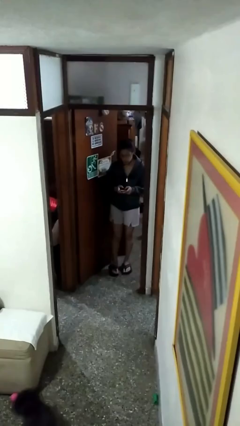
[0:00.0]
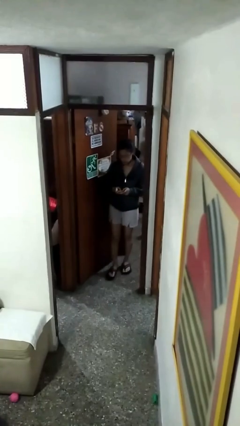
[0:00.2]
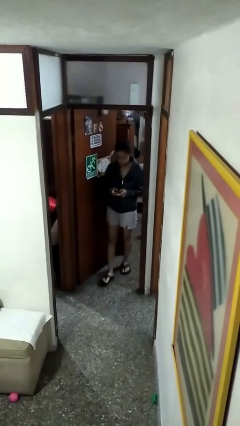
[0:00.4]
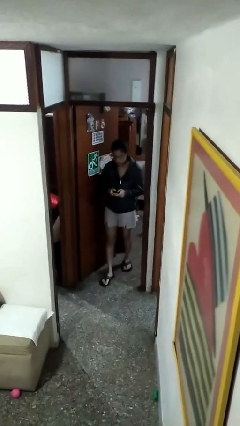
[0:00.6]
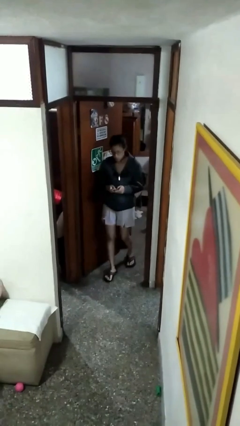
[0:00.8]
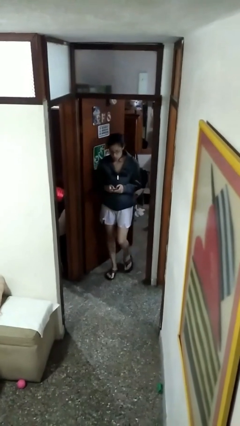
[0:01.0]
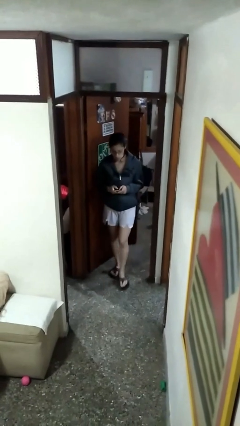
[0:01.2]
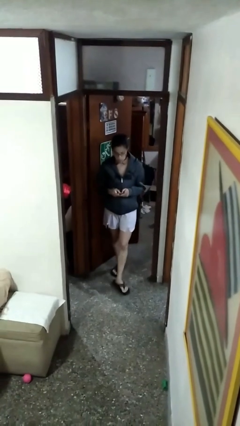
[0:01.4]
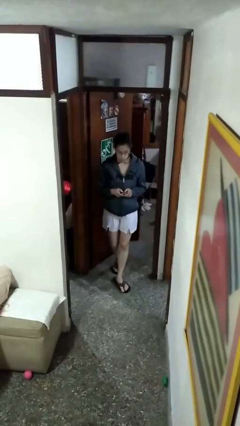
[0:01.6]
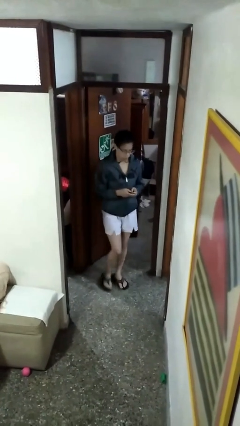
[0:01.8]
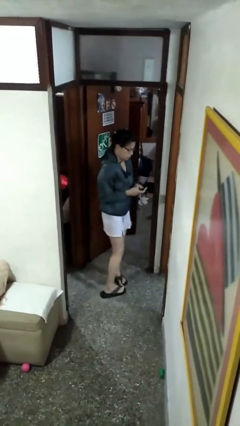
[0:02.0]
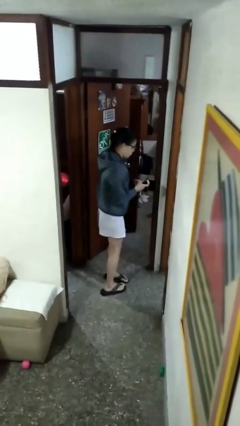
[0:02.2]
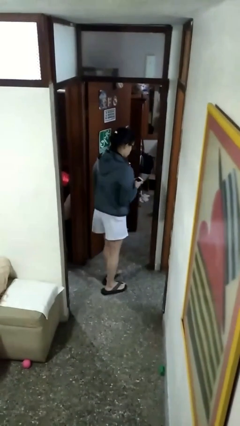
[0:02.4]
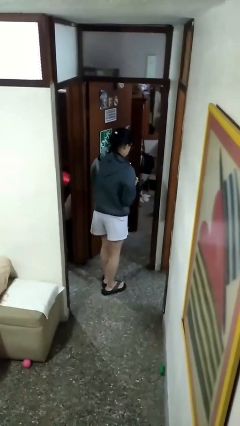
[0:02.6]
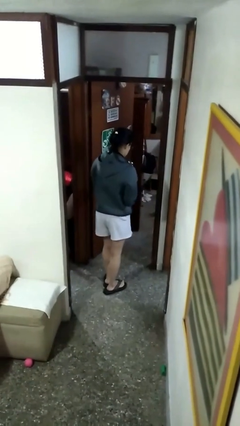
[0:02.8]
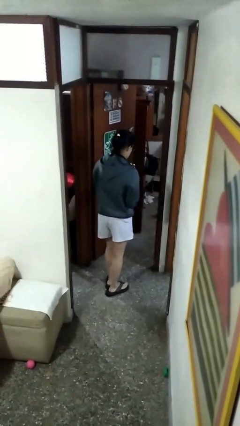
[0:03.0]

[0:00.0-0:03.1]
person enters scene through structure

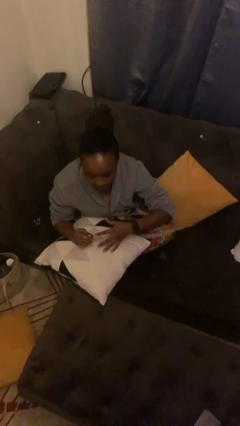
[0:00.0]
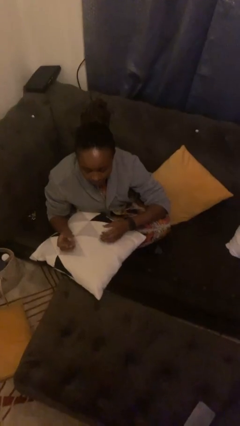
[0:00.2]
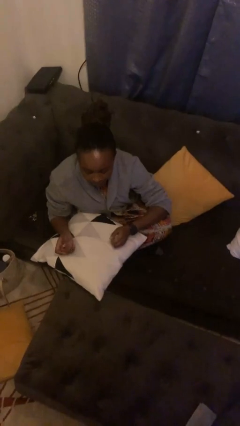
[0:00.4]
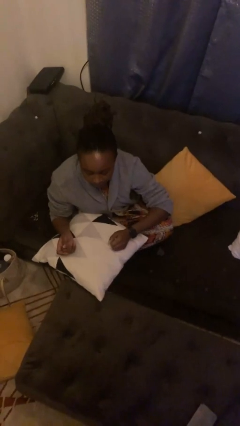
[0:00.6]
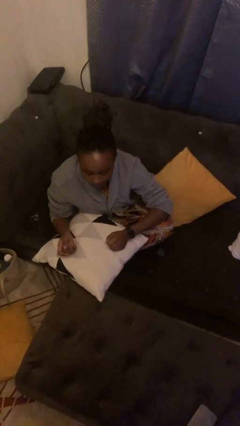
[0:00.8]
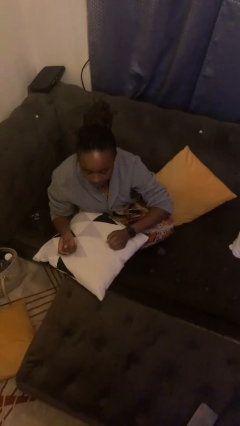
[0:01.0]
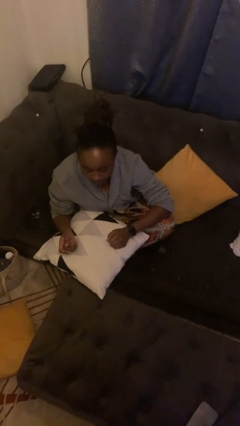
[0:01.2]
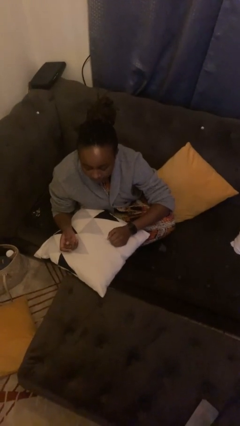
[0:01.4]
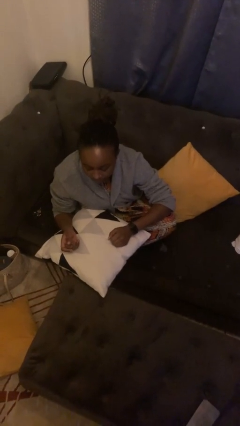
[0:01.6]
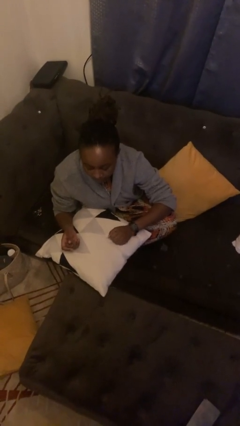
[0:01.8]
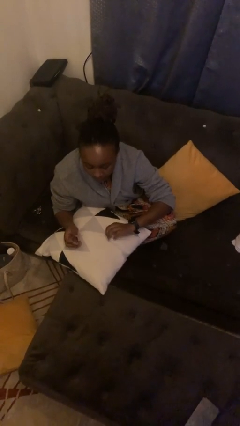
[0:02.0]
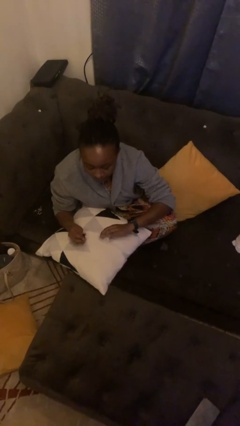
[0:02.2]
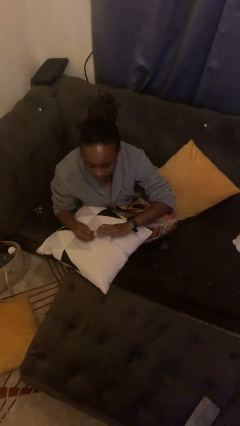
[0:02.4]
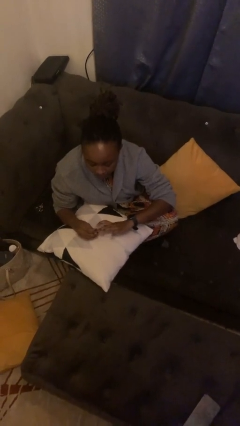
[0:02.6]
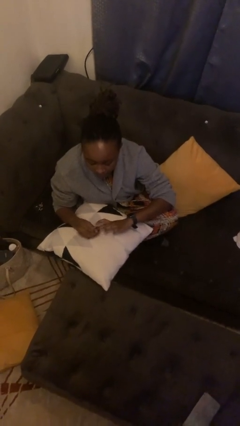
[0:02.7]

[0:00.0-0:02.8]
person takes off ring

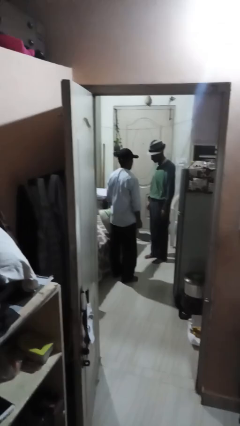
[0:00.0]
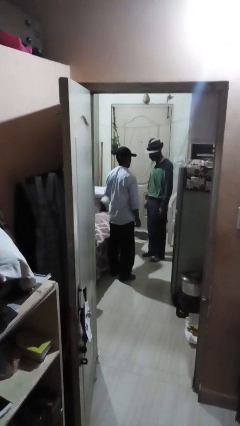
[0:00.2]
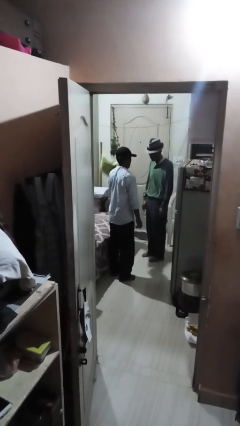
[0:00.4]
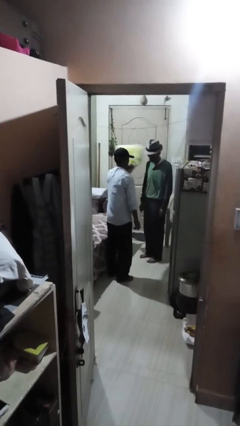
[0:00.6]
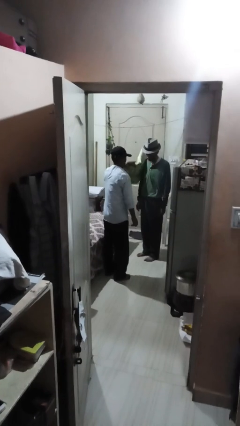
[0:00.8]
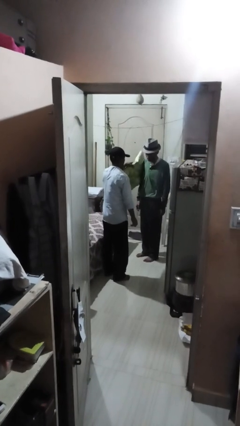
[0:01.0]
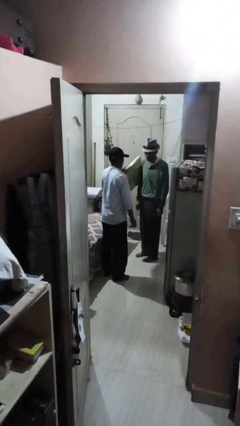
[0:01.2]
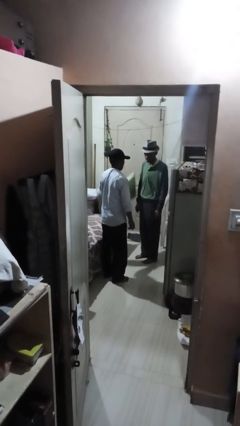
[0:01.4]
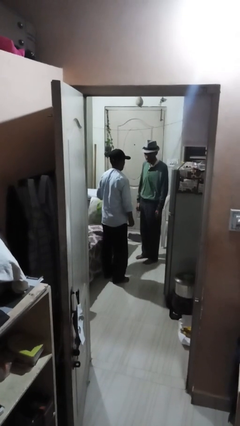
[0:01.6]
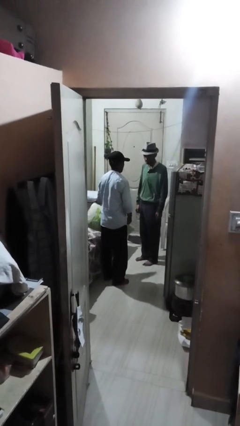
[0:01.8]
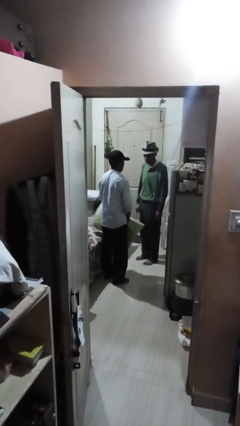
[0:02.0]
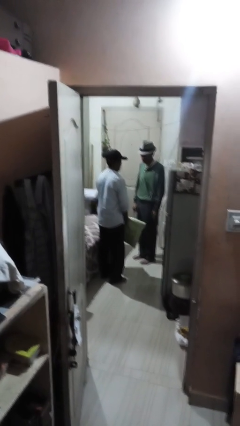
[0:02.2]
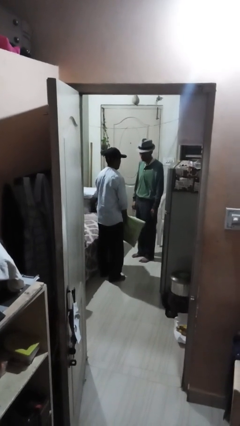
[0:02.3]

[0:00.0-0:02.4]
person hits person with pillow

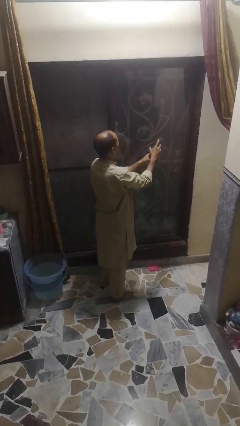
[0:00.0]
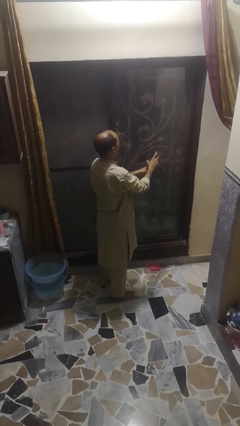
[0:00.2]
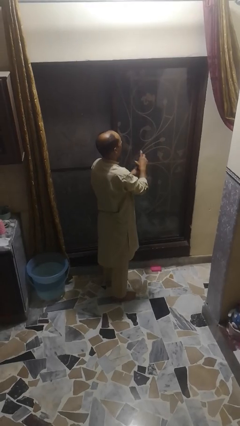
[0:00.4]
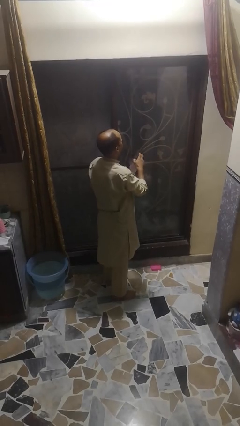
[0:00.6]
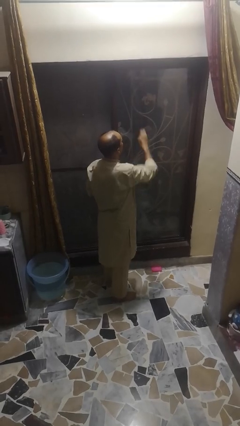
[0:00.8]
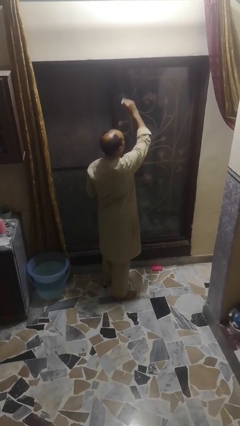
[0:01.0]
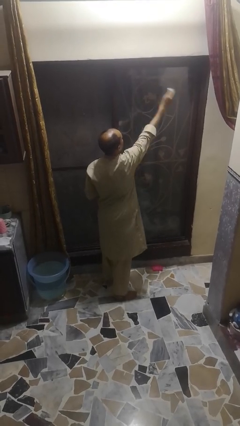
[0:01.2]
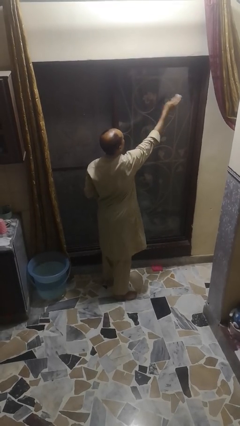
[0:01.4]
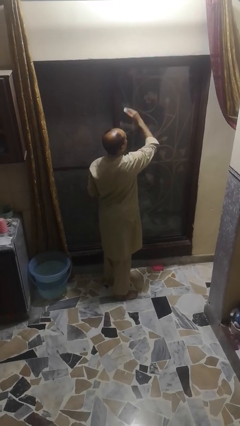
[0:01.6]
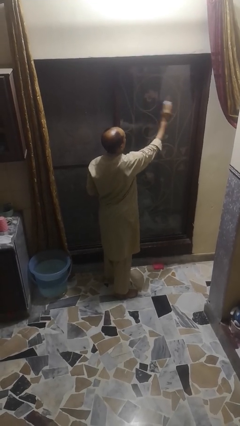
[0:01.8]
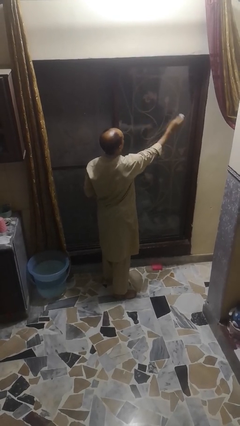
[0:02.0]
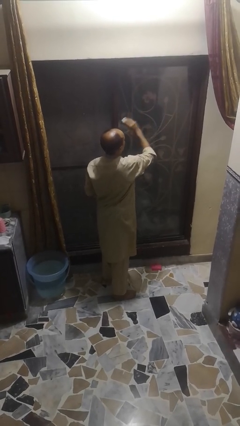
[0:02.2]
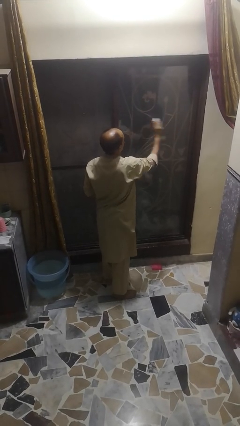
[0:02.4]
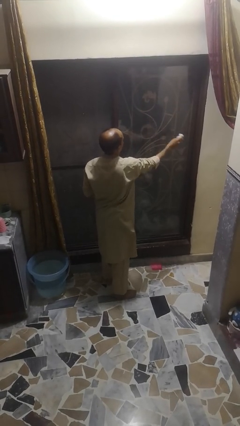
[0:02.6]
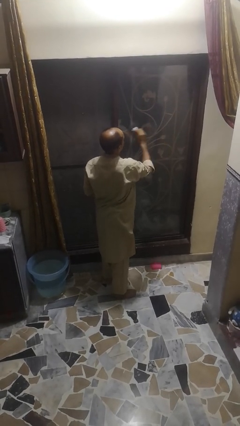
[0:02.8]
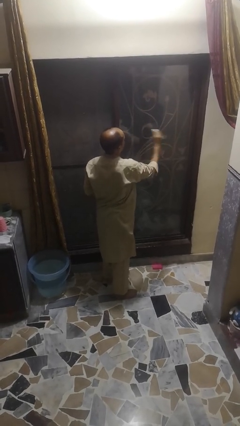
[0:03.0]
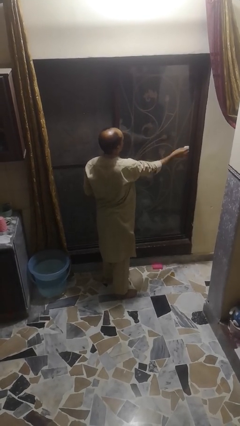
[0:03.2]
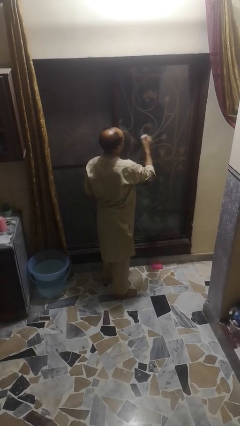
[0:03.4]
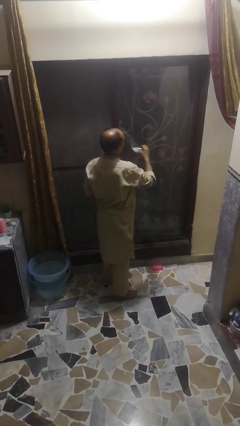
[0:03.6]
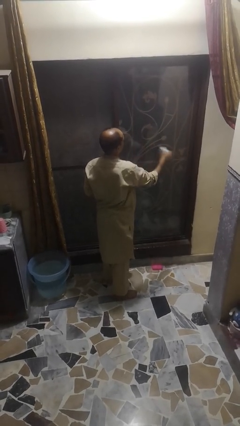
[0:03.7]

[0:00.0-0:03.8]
person washes window

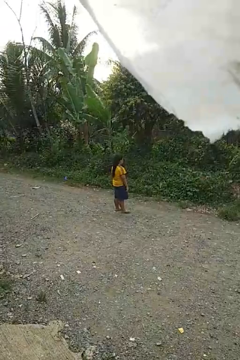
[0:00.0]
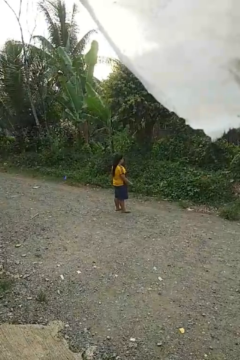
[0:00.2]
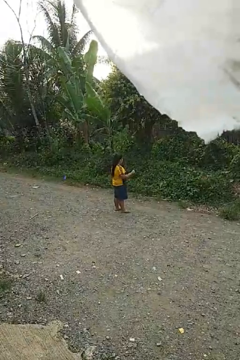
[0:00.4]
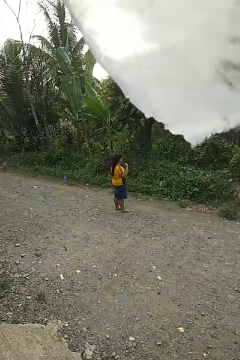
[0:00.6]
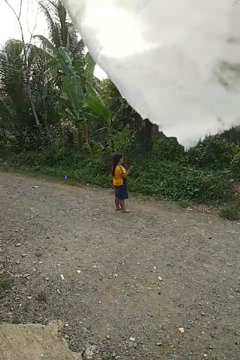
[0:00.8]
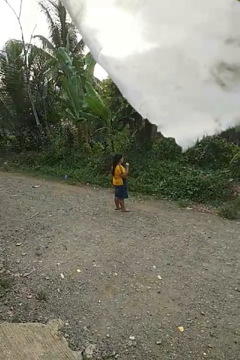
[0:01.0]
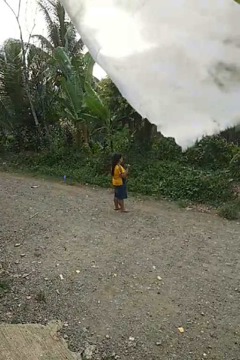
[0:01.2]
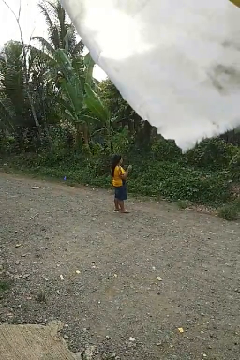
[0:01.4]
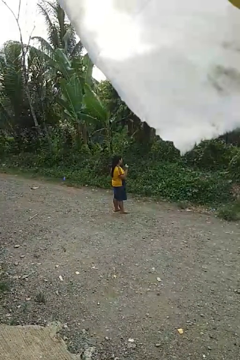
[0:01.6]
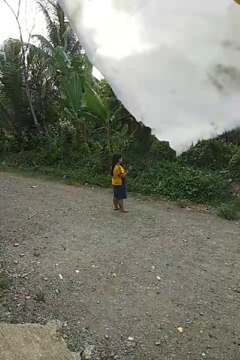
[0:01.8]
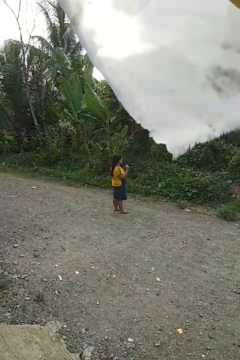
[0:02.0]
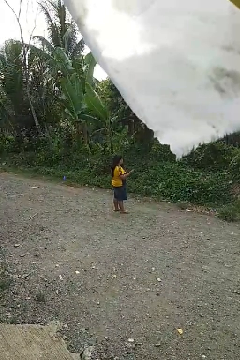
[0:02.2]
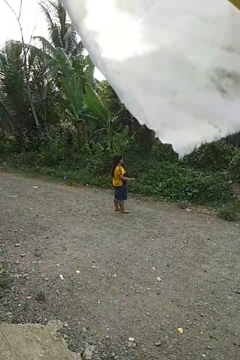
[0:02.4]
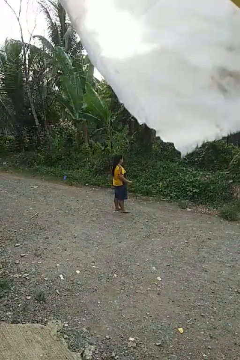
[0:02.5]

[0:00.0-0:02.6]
person snaps fingers

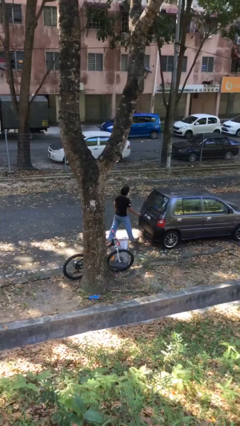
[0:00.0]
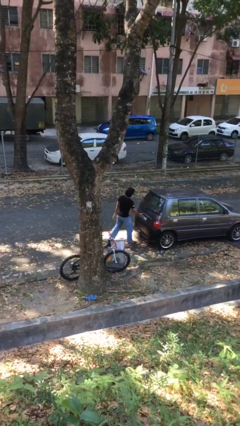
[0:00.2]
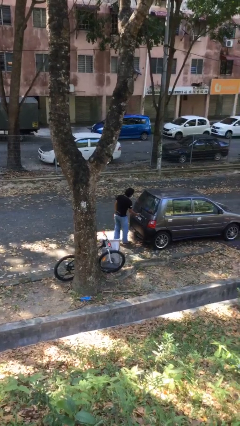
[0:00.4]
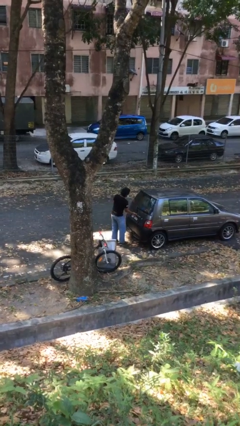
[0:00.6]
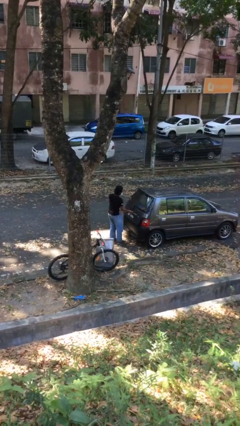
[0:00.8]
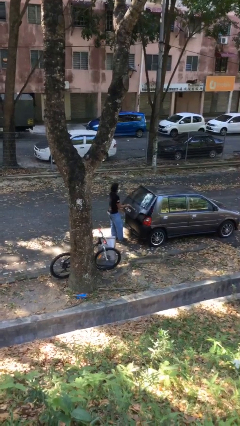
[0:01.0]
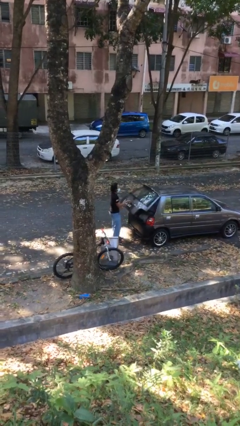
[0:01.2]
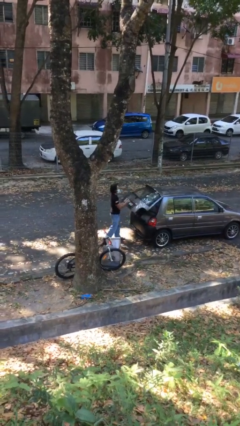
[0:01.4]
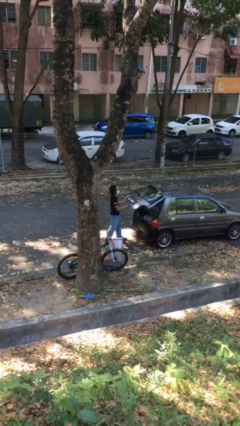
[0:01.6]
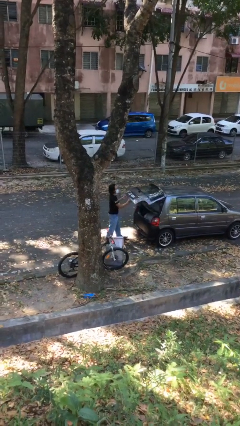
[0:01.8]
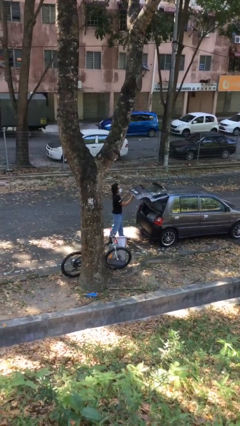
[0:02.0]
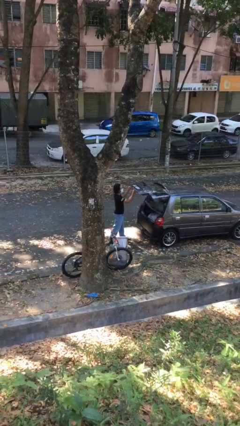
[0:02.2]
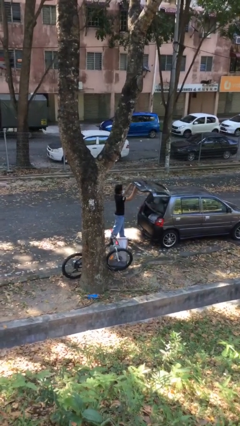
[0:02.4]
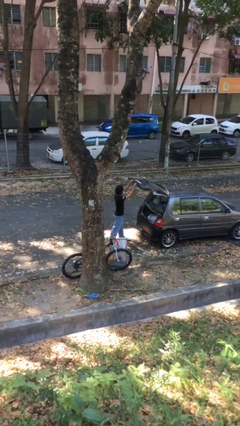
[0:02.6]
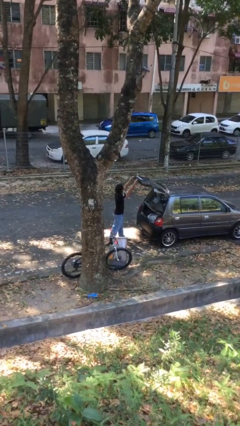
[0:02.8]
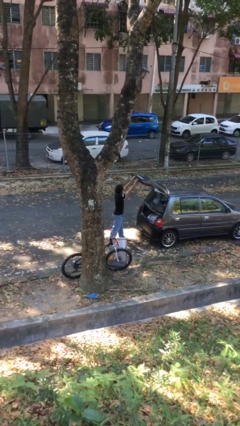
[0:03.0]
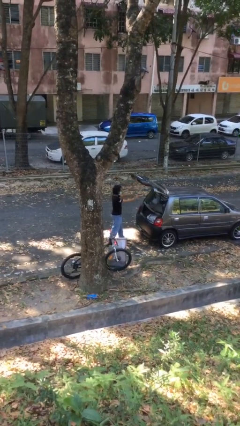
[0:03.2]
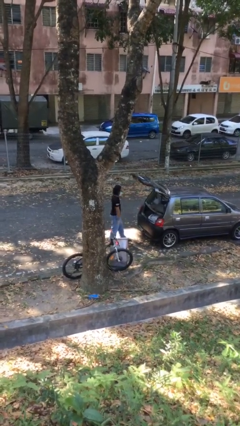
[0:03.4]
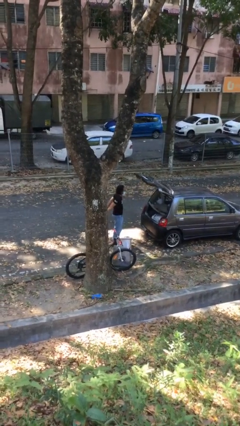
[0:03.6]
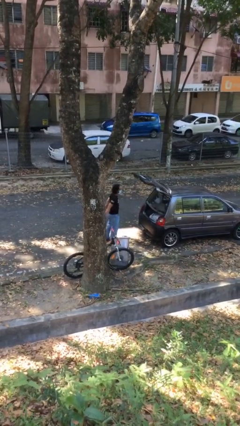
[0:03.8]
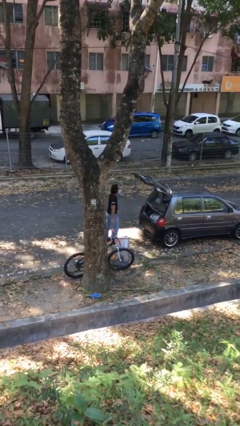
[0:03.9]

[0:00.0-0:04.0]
person opens car trunk
